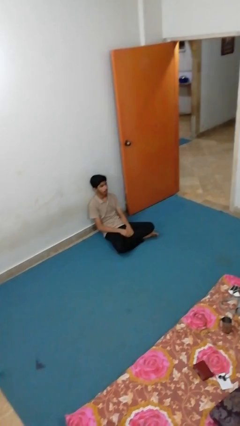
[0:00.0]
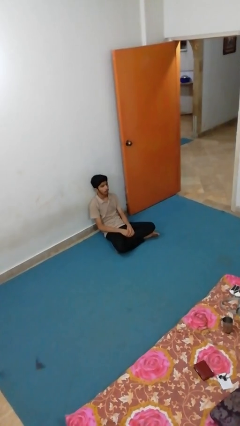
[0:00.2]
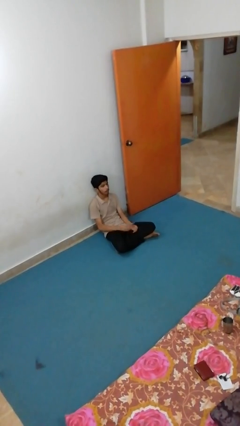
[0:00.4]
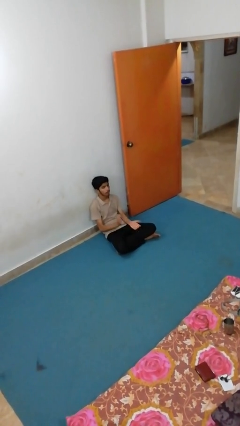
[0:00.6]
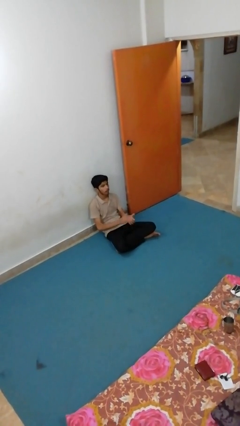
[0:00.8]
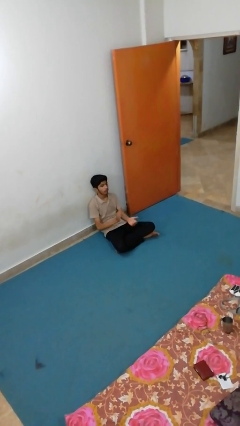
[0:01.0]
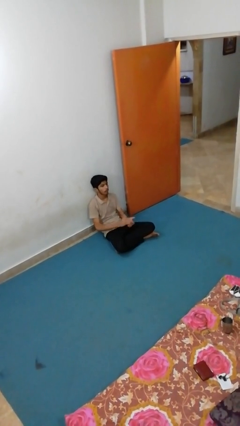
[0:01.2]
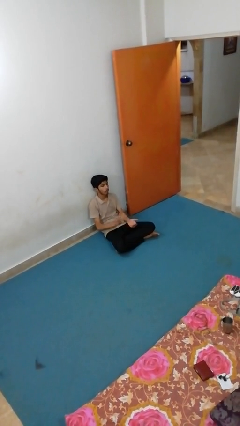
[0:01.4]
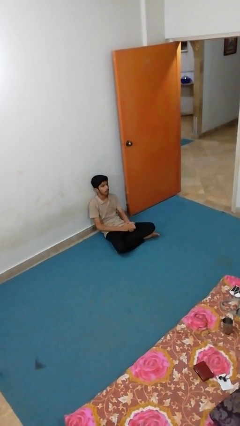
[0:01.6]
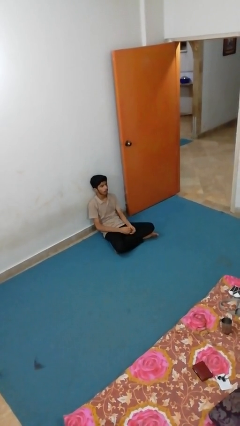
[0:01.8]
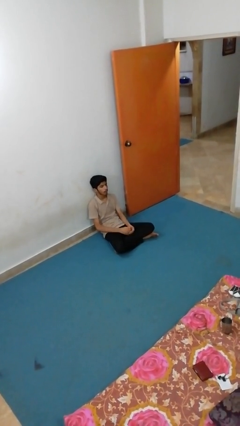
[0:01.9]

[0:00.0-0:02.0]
person claps hands

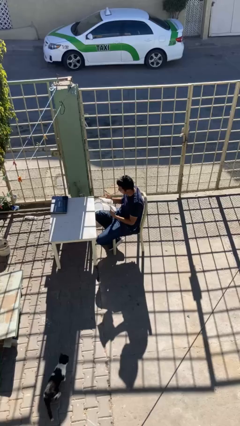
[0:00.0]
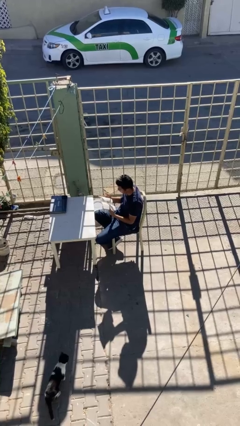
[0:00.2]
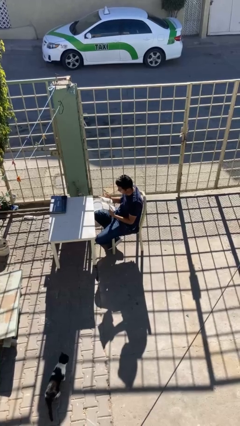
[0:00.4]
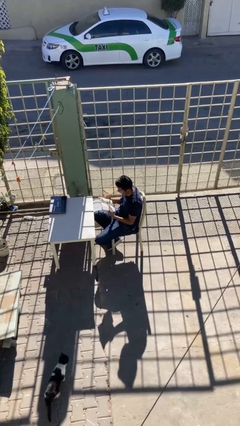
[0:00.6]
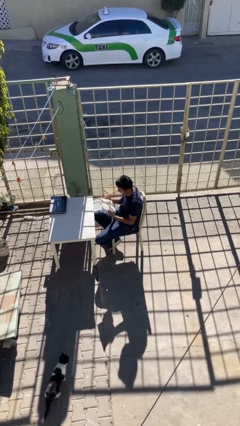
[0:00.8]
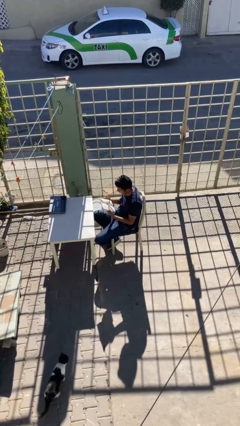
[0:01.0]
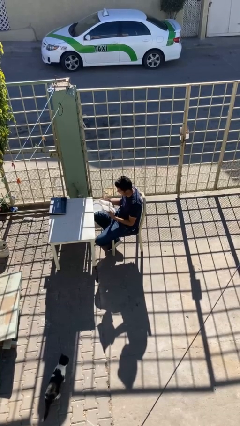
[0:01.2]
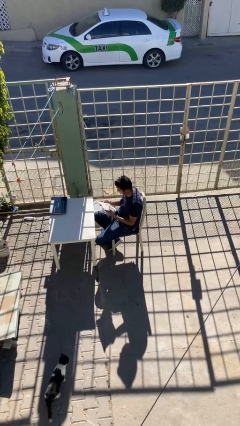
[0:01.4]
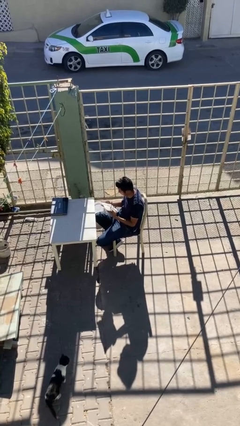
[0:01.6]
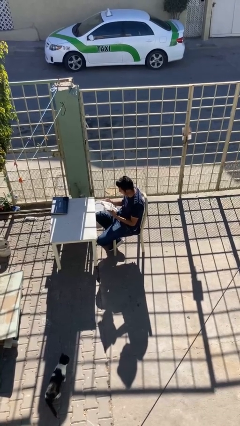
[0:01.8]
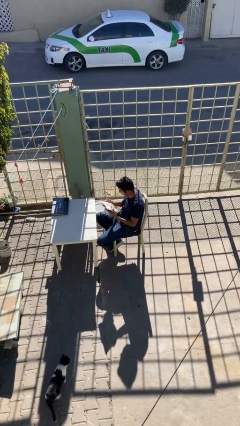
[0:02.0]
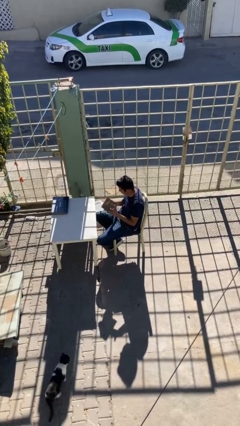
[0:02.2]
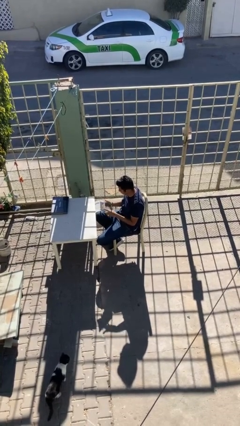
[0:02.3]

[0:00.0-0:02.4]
person reads document

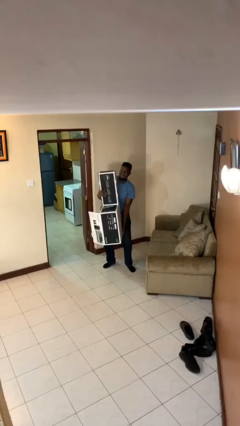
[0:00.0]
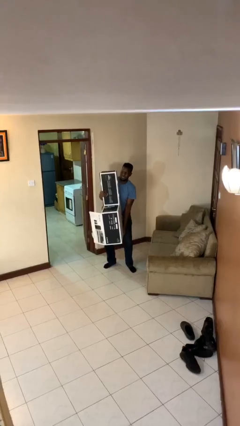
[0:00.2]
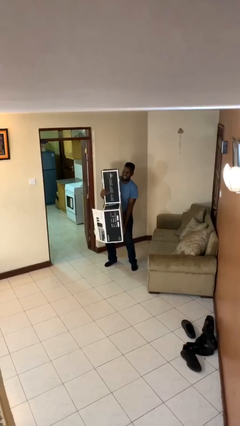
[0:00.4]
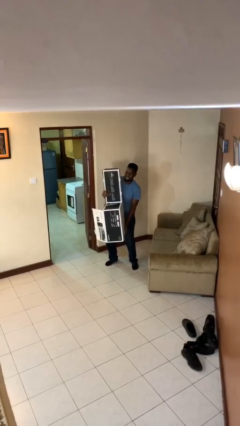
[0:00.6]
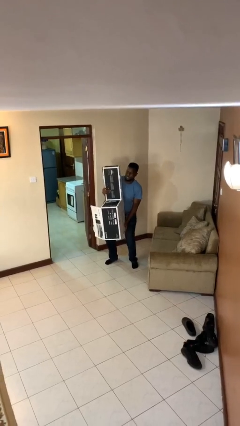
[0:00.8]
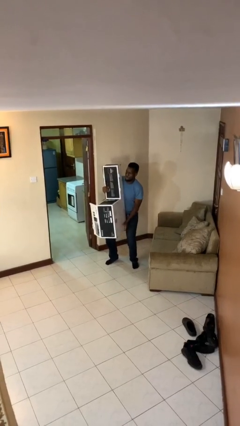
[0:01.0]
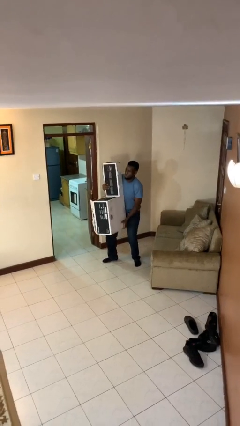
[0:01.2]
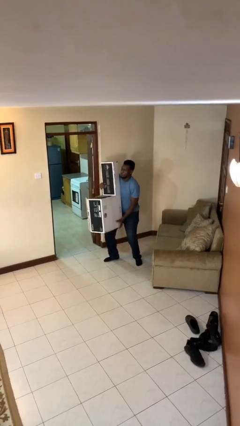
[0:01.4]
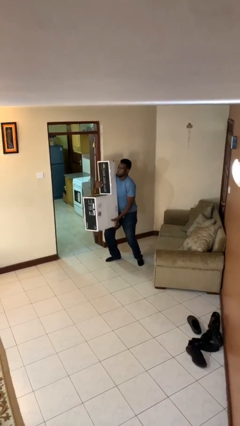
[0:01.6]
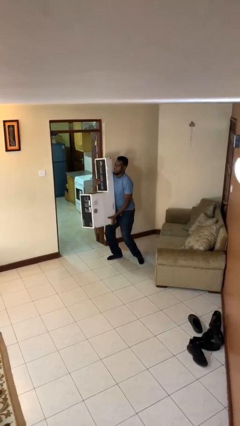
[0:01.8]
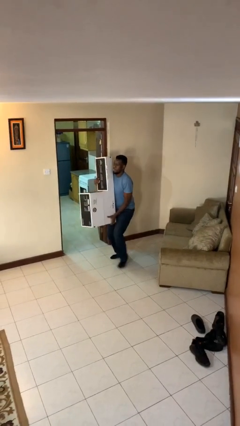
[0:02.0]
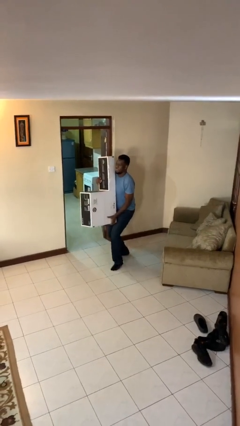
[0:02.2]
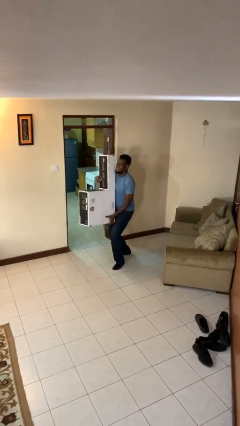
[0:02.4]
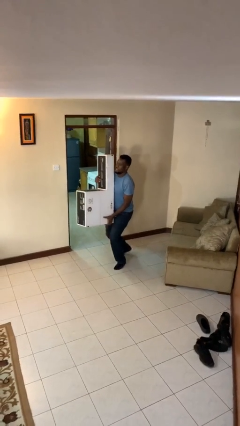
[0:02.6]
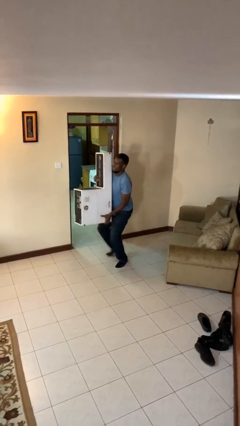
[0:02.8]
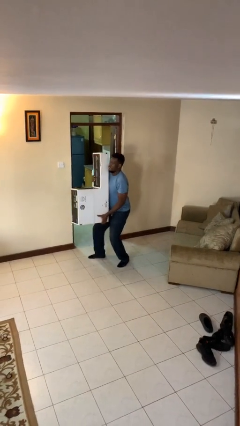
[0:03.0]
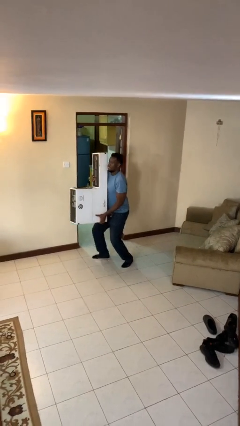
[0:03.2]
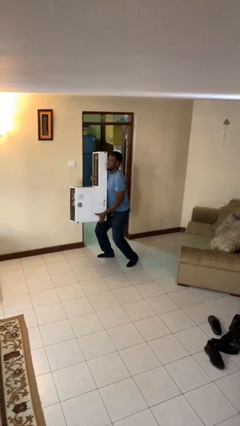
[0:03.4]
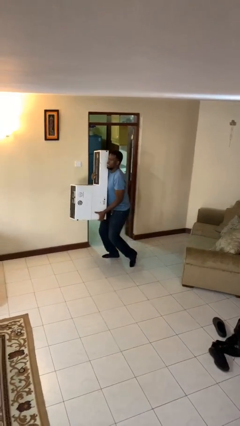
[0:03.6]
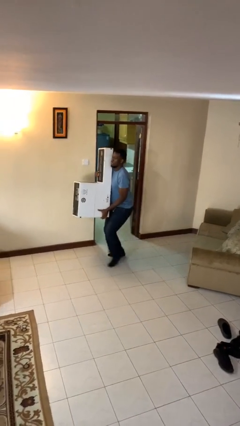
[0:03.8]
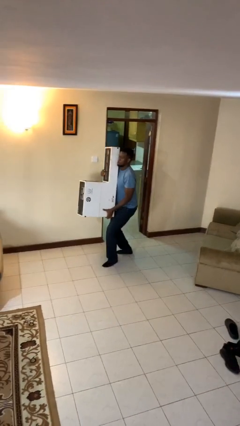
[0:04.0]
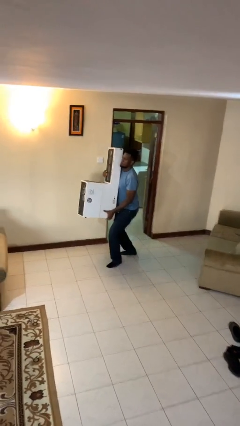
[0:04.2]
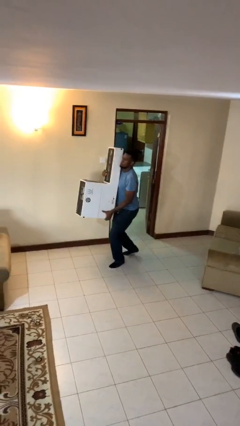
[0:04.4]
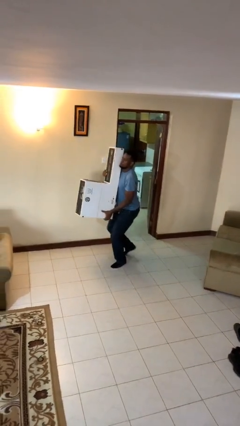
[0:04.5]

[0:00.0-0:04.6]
person carries heavy object

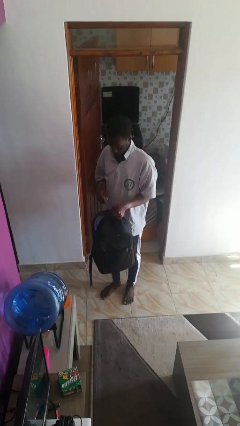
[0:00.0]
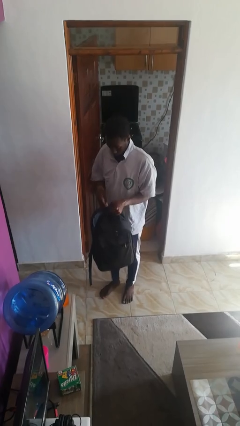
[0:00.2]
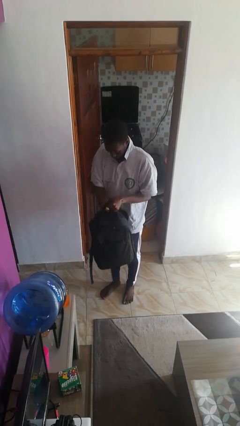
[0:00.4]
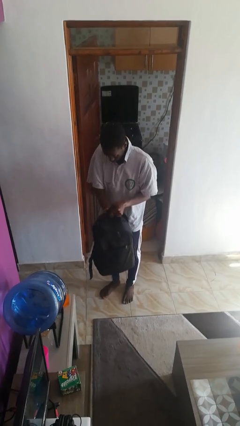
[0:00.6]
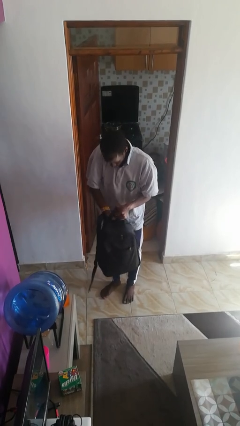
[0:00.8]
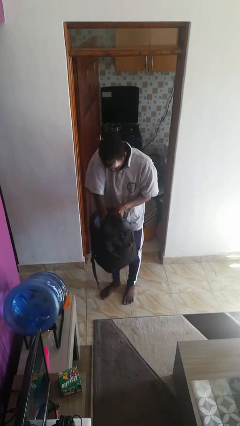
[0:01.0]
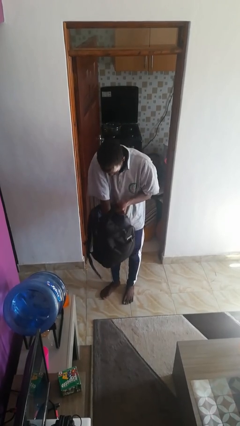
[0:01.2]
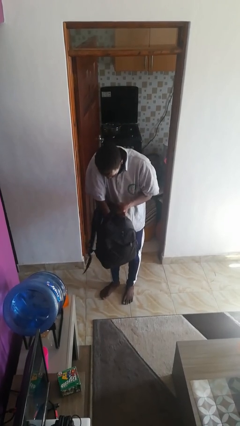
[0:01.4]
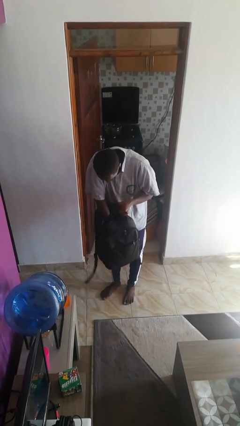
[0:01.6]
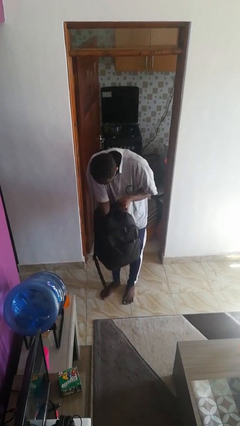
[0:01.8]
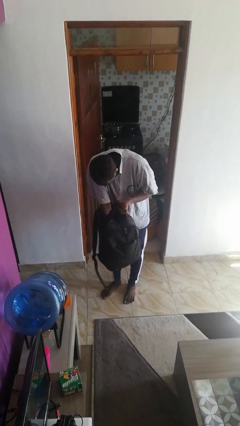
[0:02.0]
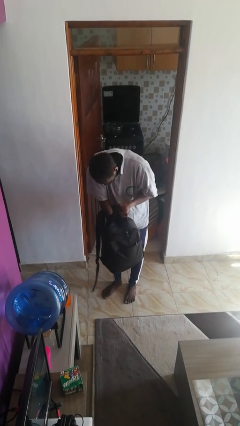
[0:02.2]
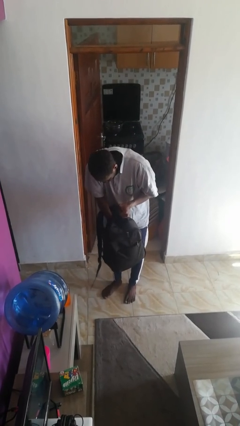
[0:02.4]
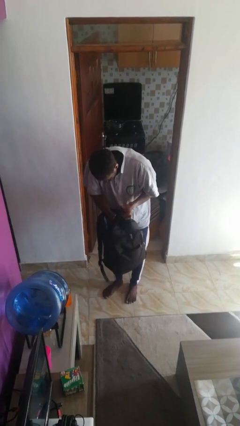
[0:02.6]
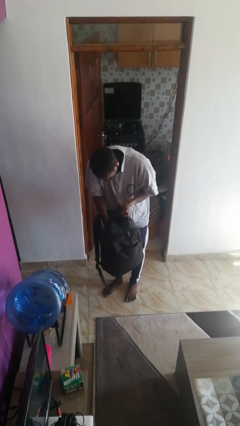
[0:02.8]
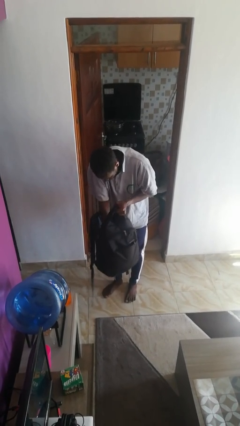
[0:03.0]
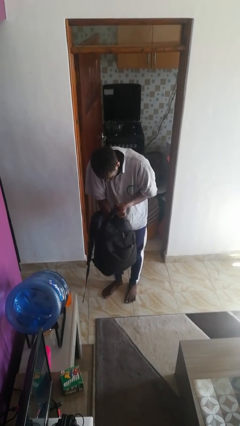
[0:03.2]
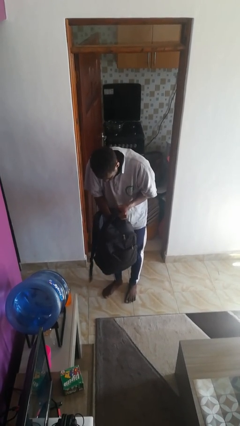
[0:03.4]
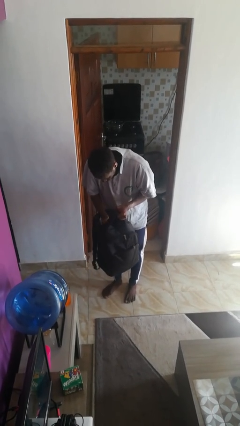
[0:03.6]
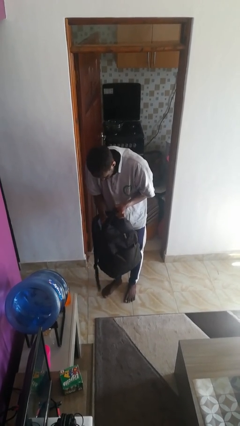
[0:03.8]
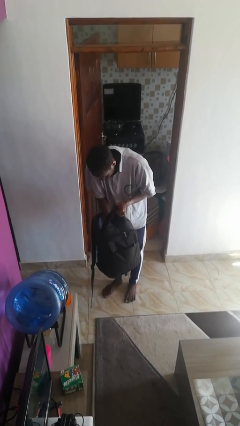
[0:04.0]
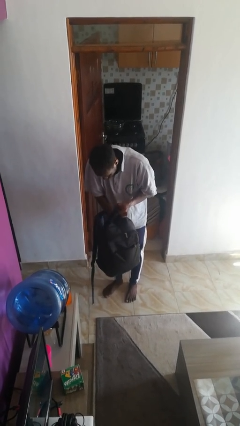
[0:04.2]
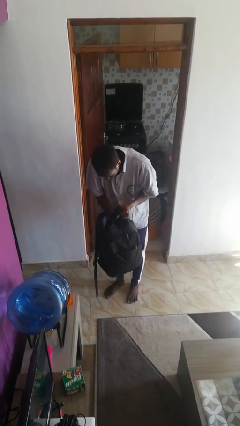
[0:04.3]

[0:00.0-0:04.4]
person searches in backpack

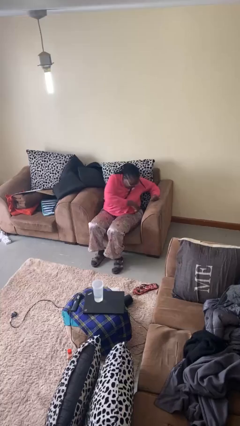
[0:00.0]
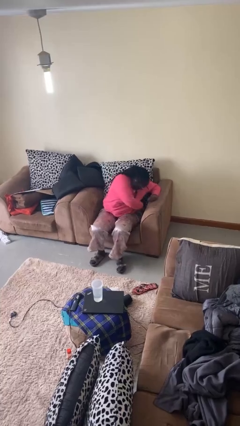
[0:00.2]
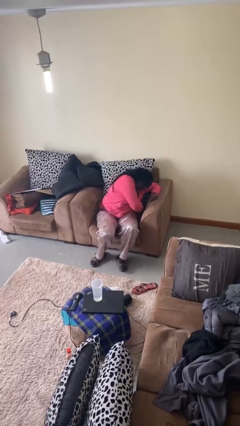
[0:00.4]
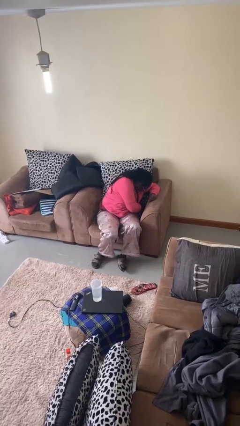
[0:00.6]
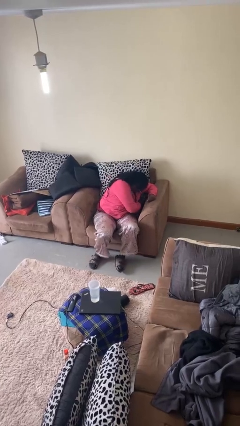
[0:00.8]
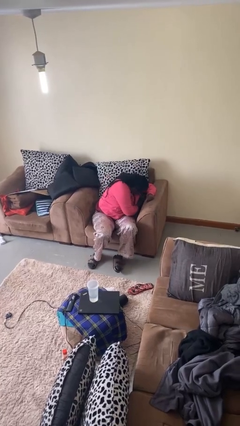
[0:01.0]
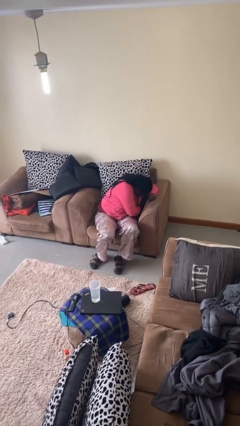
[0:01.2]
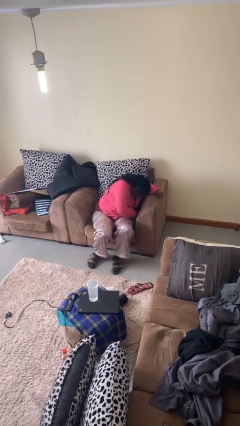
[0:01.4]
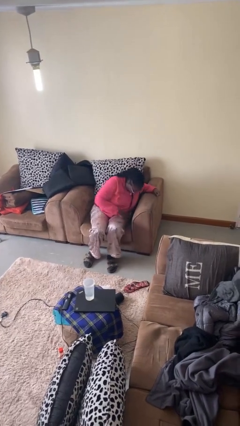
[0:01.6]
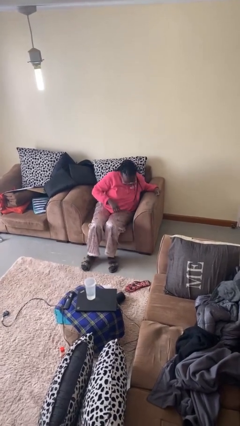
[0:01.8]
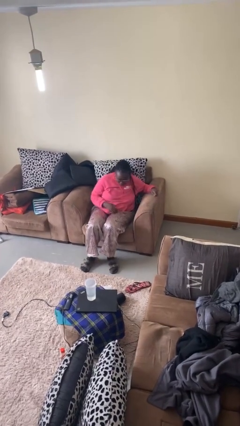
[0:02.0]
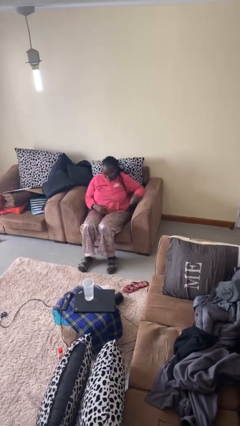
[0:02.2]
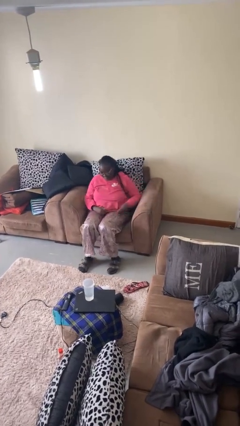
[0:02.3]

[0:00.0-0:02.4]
person searches in couch

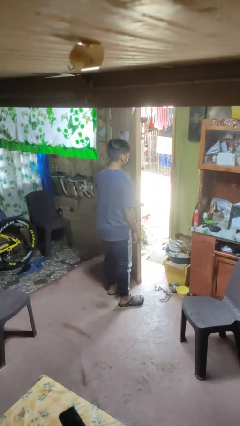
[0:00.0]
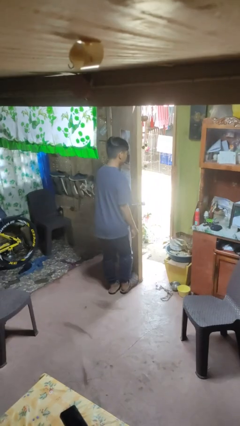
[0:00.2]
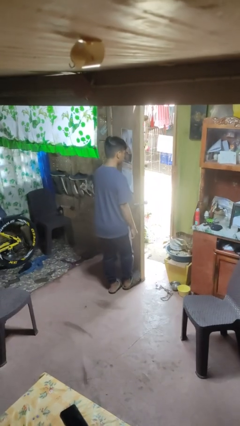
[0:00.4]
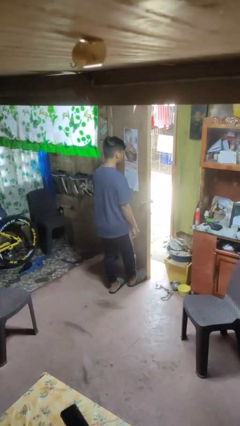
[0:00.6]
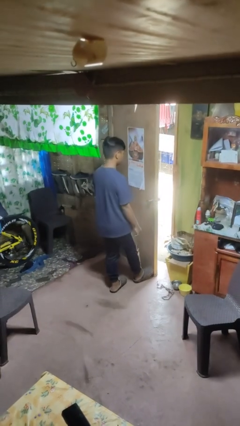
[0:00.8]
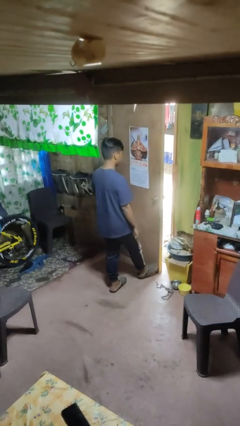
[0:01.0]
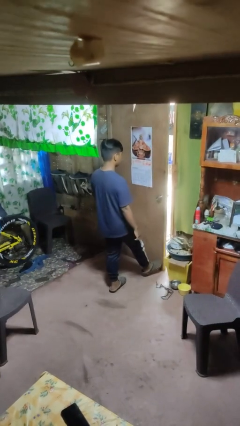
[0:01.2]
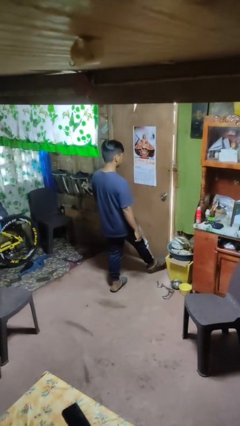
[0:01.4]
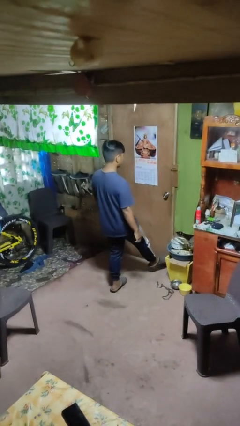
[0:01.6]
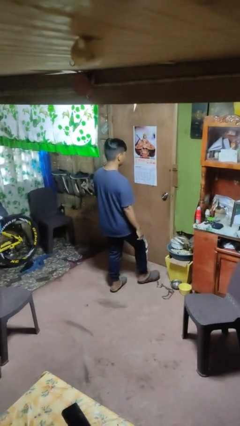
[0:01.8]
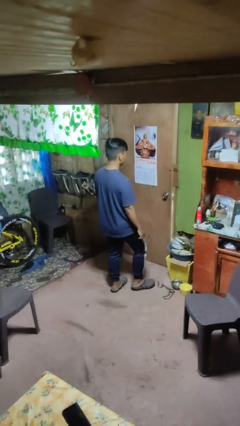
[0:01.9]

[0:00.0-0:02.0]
person closes door with foot
